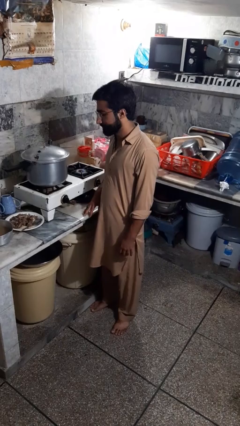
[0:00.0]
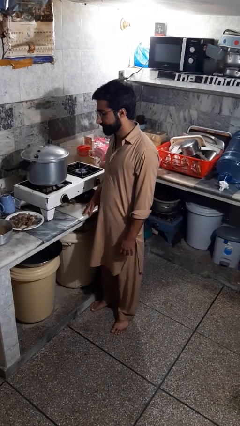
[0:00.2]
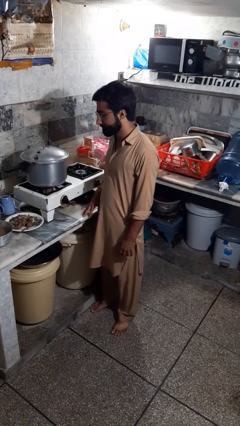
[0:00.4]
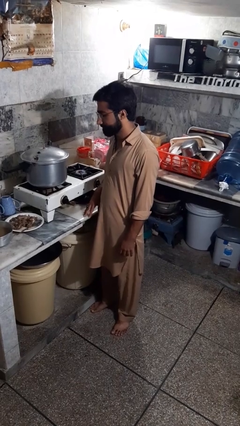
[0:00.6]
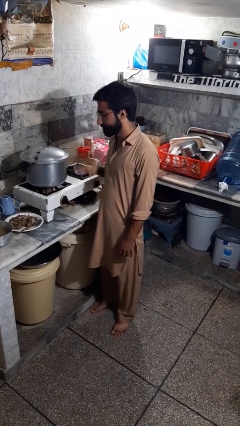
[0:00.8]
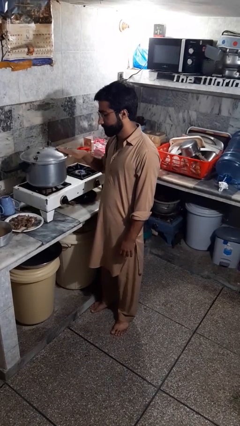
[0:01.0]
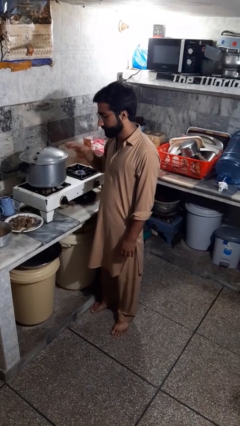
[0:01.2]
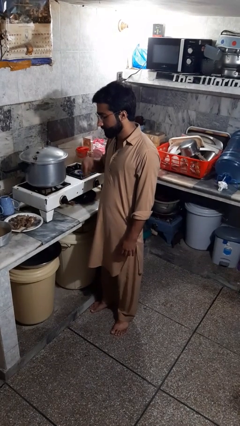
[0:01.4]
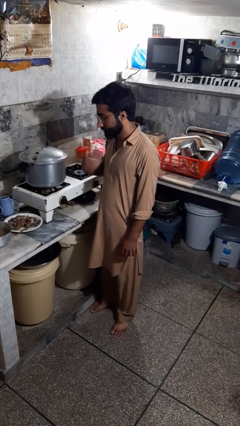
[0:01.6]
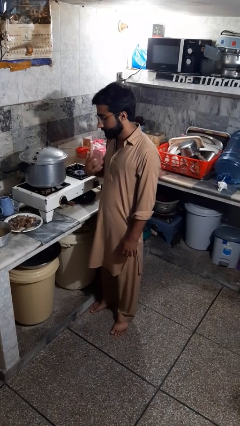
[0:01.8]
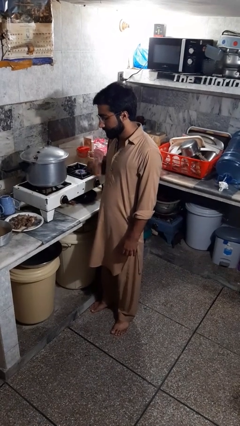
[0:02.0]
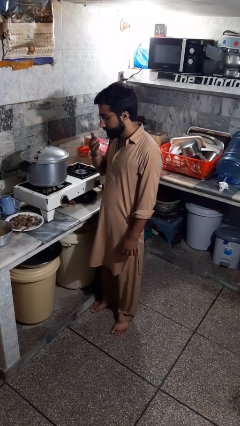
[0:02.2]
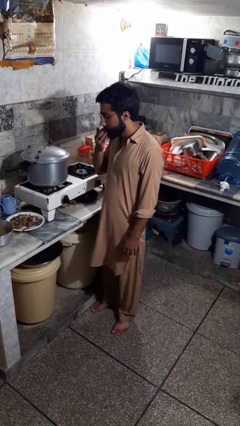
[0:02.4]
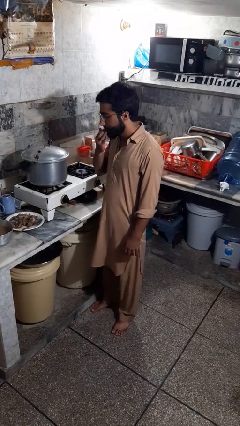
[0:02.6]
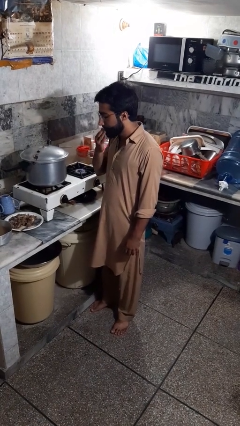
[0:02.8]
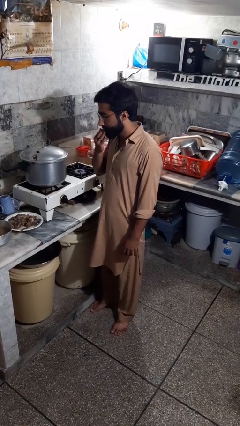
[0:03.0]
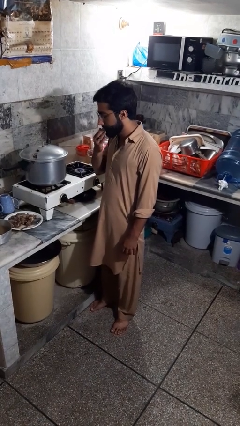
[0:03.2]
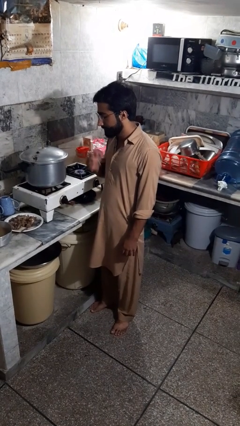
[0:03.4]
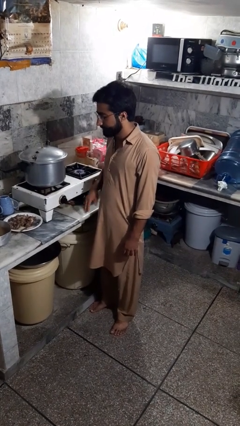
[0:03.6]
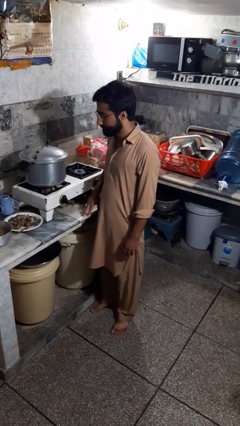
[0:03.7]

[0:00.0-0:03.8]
person burns hand

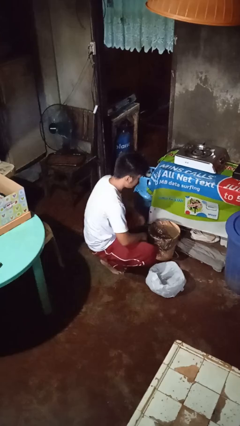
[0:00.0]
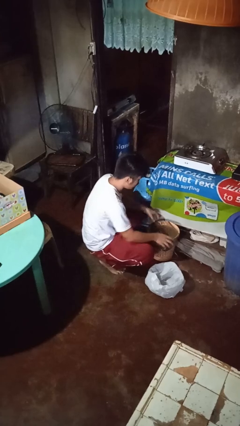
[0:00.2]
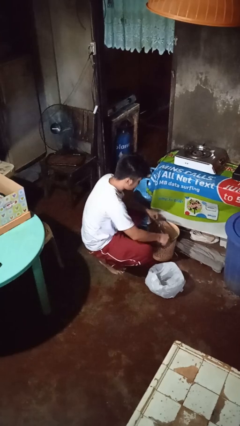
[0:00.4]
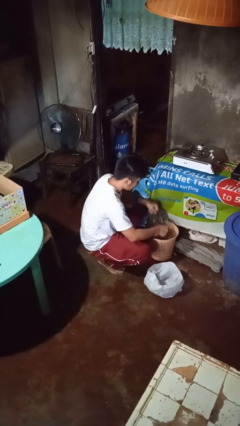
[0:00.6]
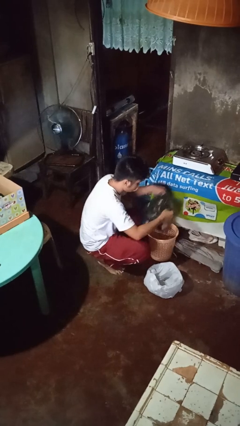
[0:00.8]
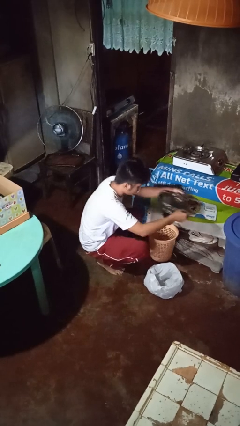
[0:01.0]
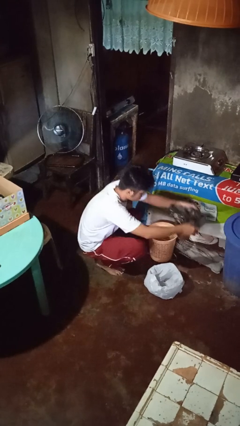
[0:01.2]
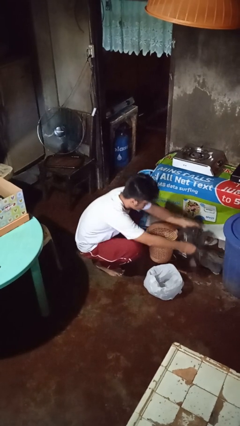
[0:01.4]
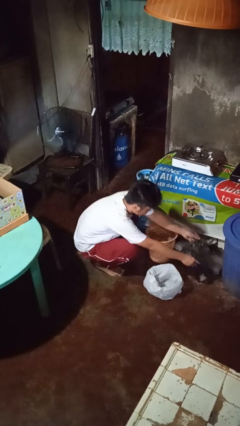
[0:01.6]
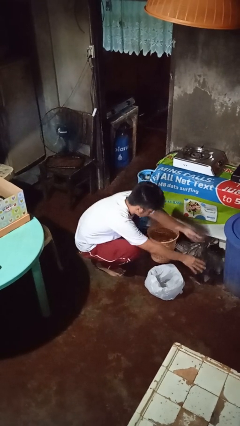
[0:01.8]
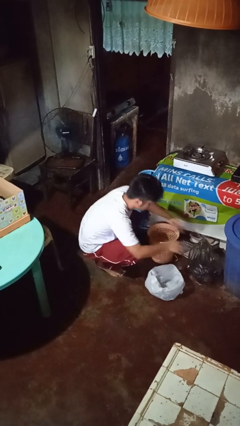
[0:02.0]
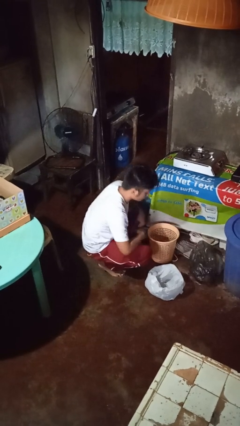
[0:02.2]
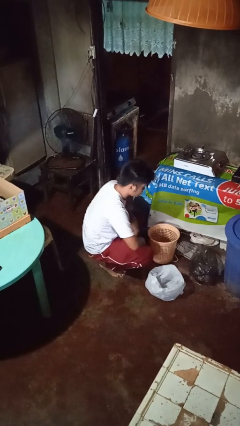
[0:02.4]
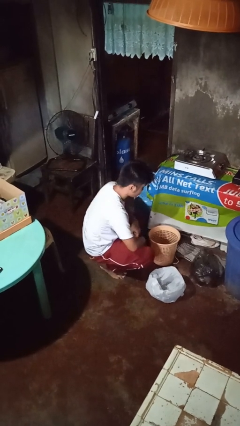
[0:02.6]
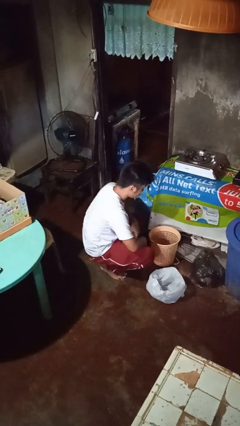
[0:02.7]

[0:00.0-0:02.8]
person removes trashbag from trashcan

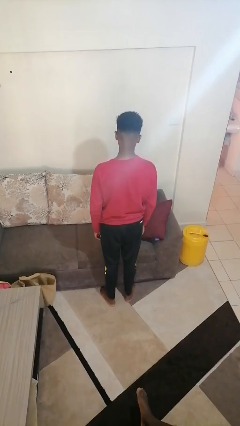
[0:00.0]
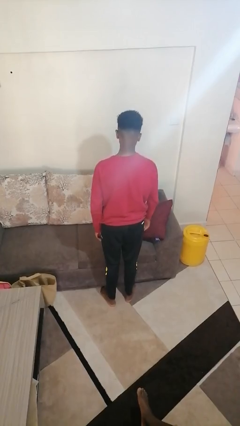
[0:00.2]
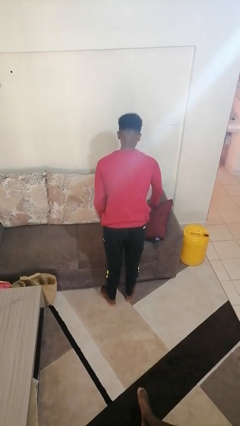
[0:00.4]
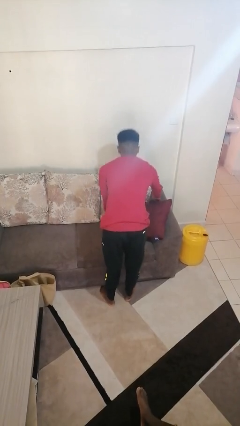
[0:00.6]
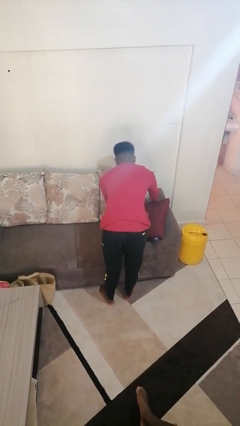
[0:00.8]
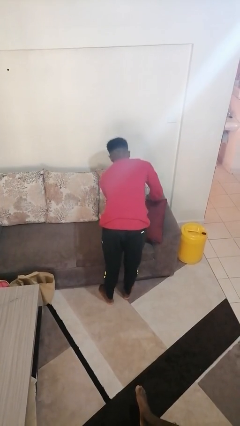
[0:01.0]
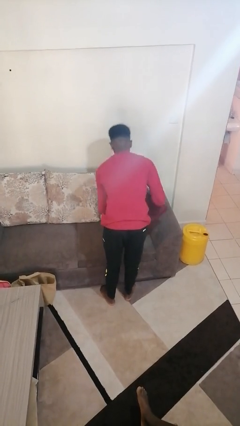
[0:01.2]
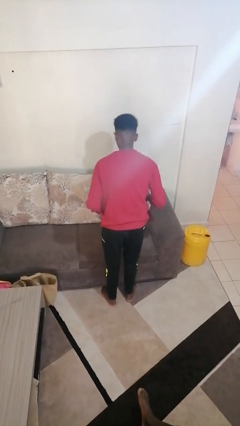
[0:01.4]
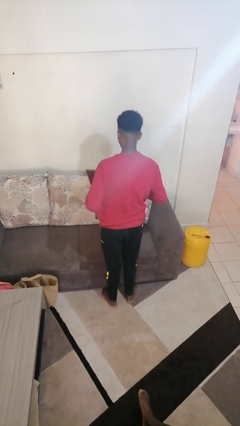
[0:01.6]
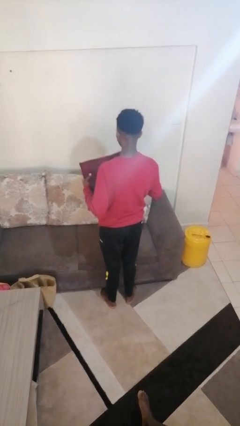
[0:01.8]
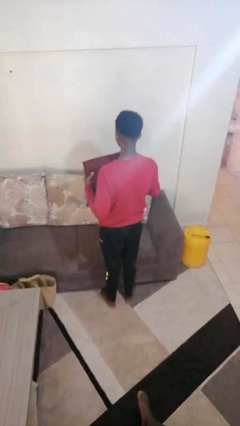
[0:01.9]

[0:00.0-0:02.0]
person picks up object from couch

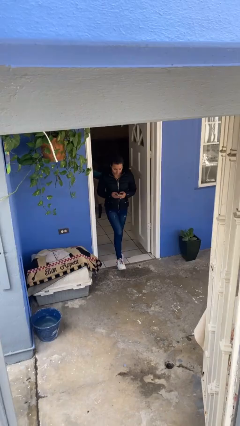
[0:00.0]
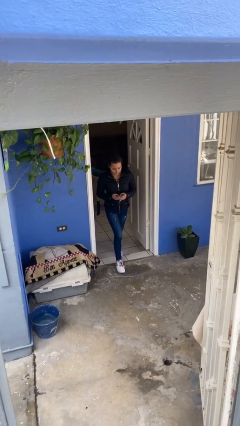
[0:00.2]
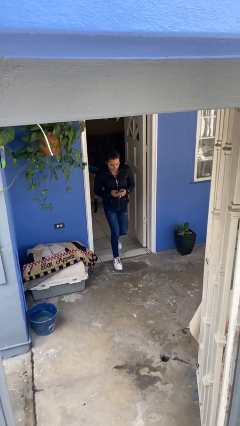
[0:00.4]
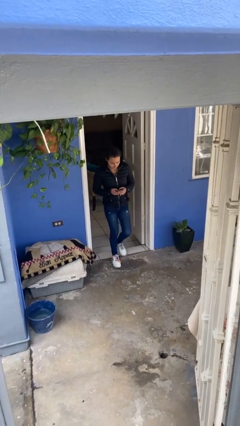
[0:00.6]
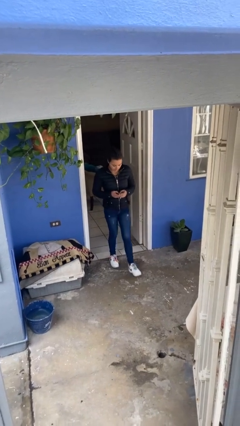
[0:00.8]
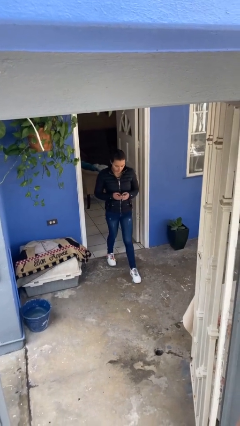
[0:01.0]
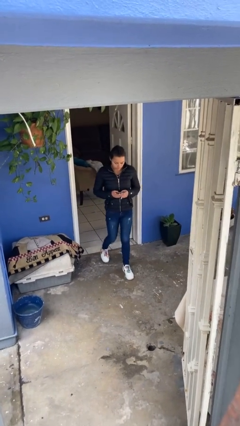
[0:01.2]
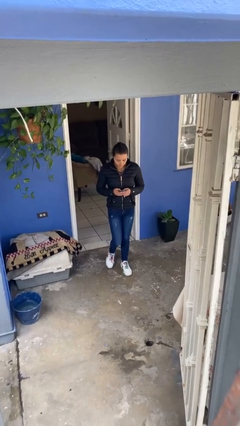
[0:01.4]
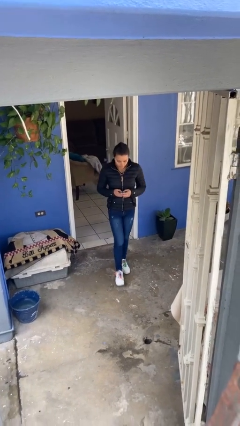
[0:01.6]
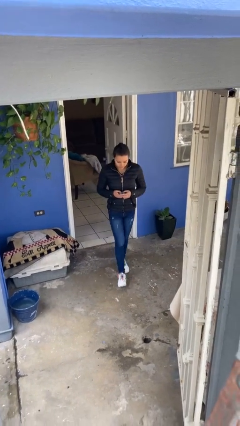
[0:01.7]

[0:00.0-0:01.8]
person enters scene through structure

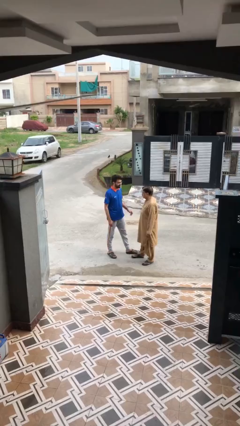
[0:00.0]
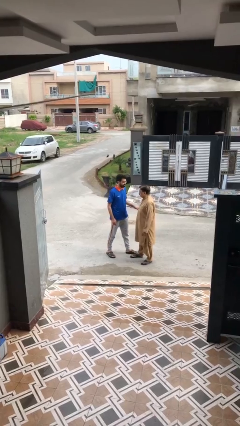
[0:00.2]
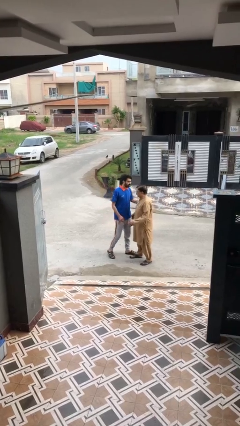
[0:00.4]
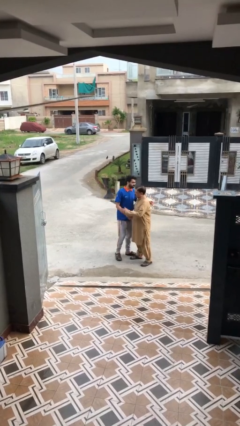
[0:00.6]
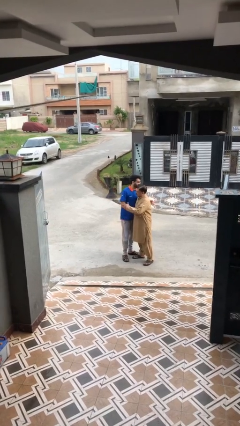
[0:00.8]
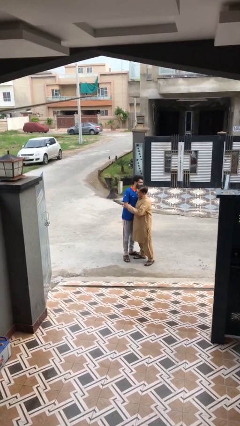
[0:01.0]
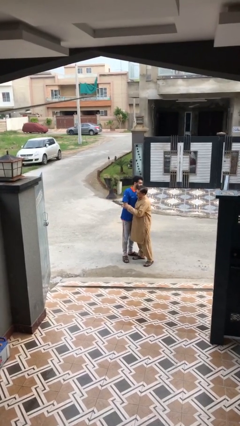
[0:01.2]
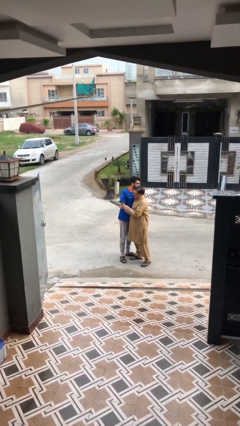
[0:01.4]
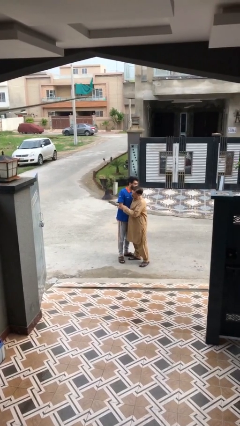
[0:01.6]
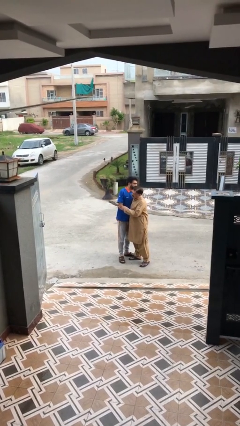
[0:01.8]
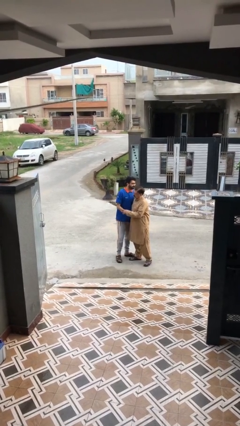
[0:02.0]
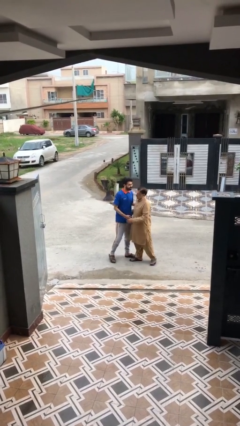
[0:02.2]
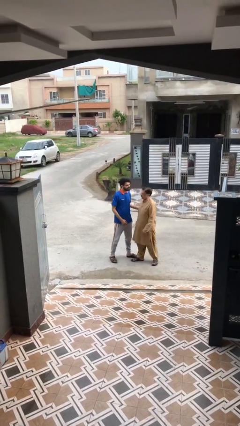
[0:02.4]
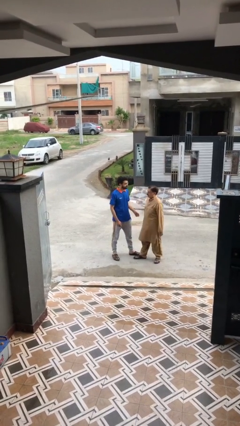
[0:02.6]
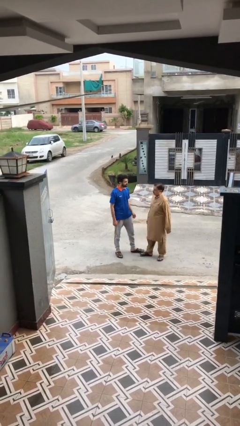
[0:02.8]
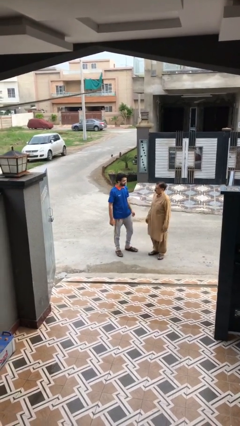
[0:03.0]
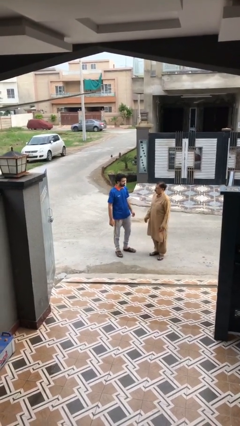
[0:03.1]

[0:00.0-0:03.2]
person embraces person

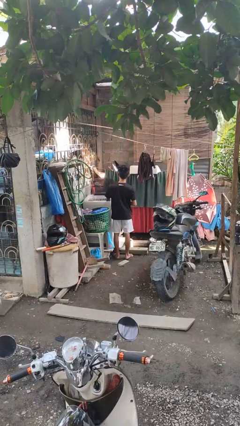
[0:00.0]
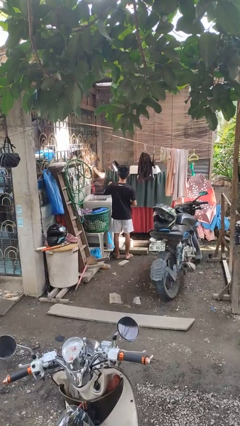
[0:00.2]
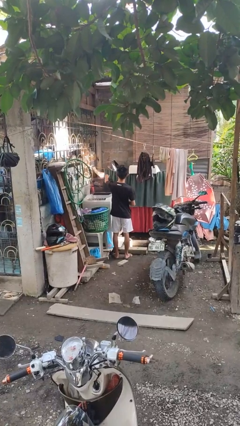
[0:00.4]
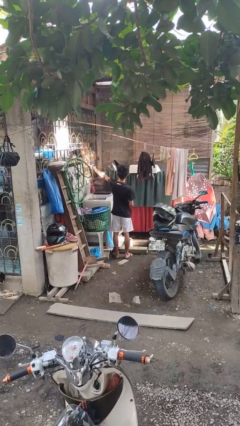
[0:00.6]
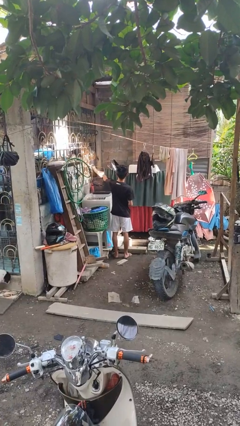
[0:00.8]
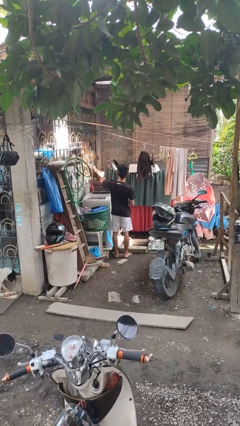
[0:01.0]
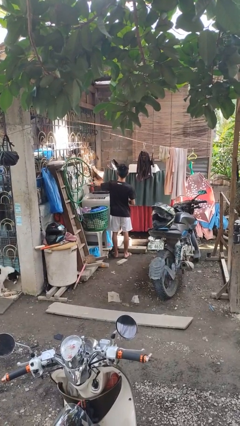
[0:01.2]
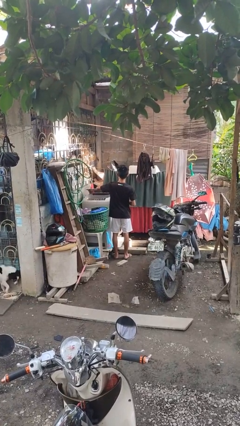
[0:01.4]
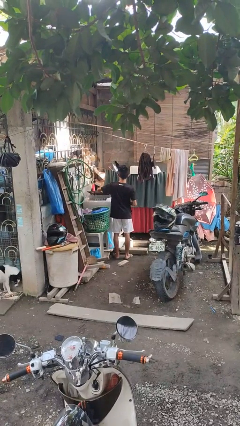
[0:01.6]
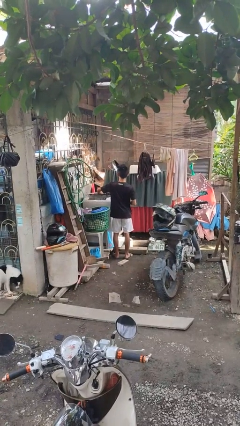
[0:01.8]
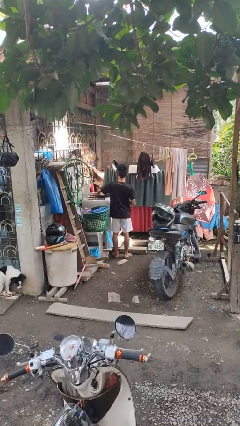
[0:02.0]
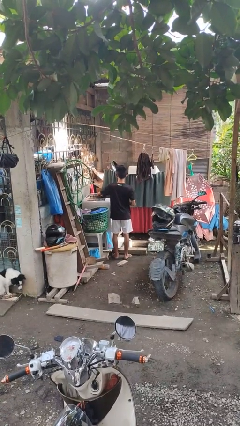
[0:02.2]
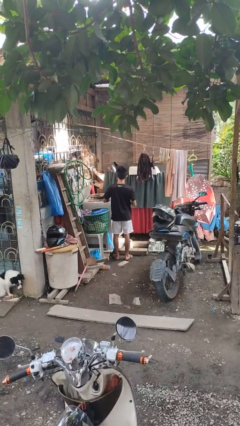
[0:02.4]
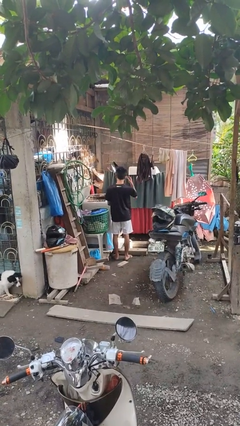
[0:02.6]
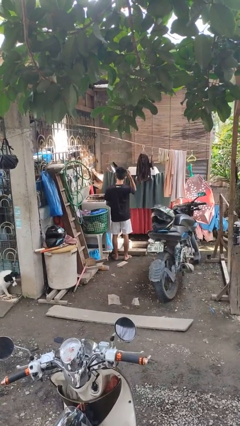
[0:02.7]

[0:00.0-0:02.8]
person closes clothes washer

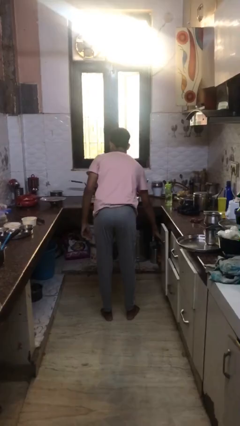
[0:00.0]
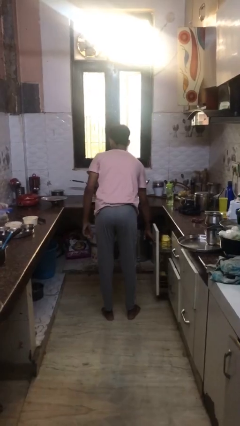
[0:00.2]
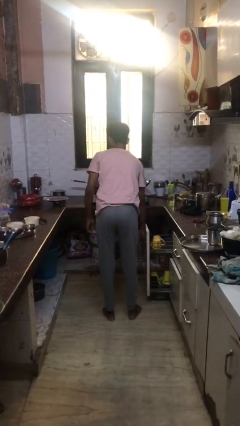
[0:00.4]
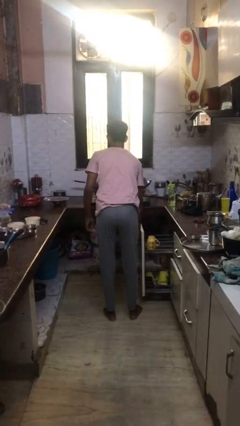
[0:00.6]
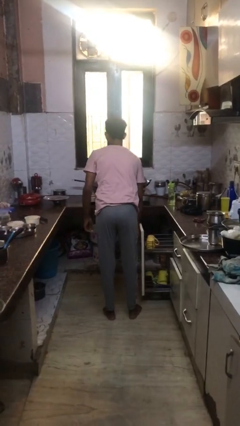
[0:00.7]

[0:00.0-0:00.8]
person opens dishwasher

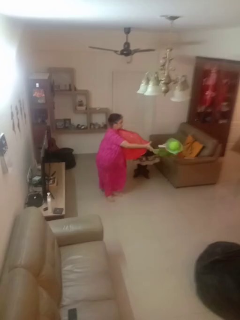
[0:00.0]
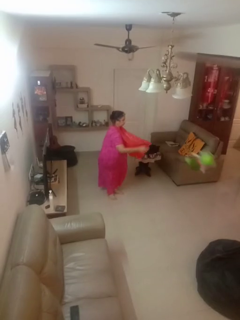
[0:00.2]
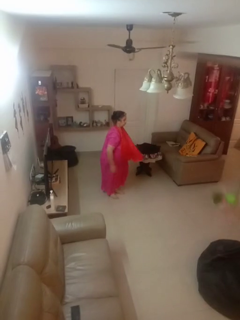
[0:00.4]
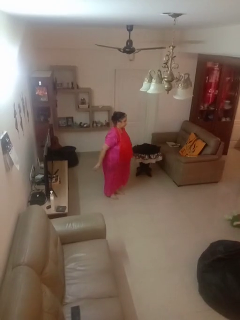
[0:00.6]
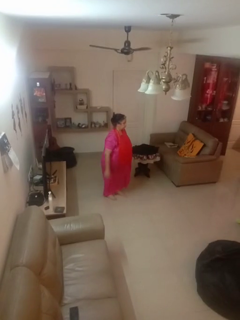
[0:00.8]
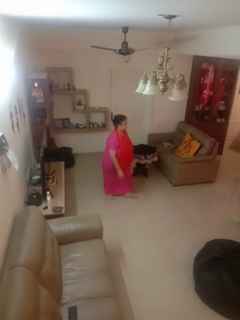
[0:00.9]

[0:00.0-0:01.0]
person throws object to ground
